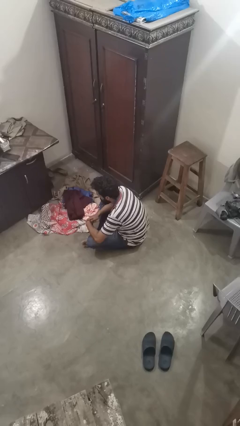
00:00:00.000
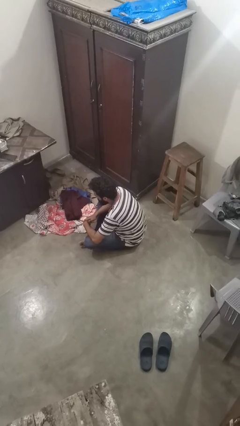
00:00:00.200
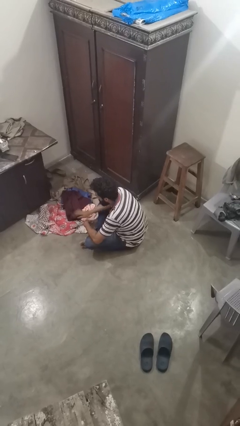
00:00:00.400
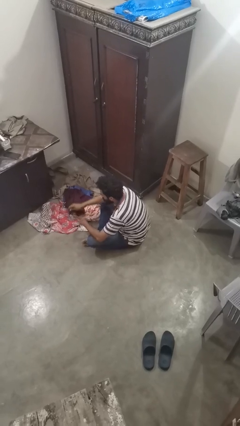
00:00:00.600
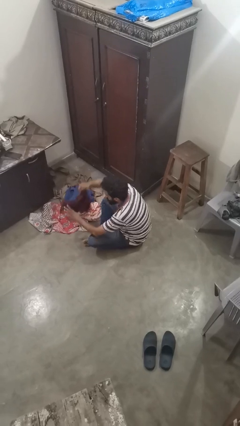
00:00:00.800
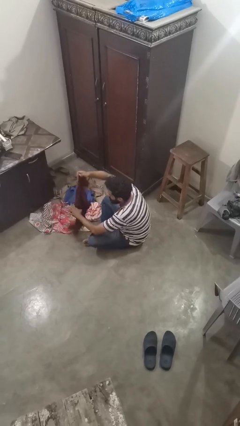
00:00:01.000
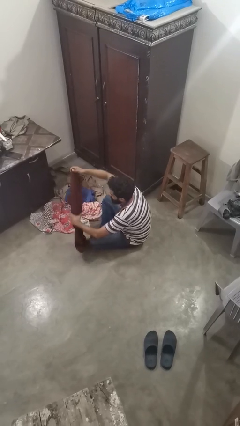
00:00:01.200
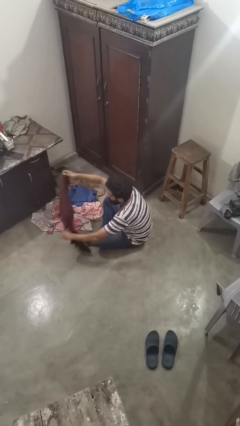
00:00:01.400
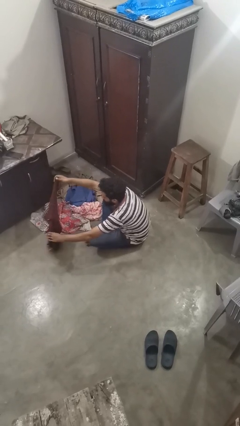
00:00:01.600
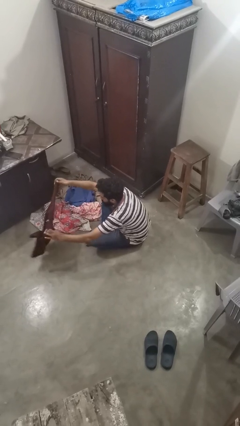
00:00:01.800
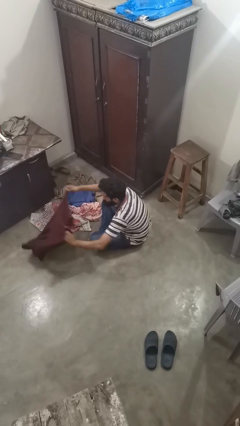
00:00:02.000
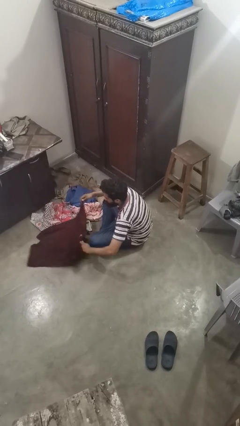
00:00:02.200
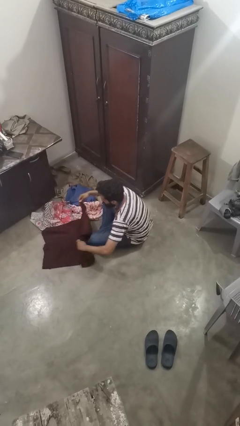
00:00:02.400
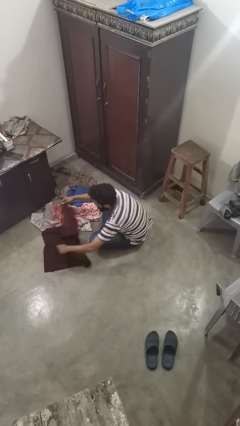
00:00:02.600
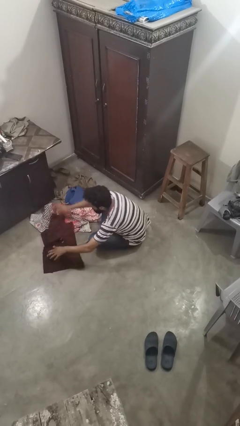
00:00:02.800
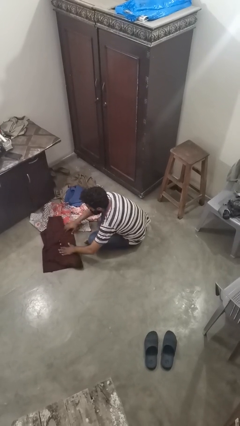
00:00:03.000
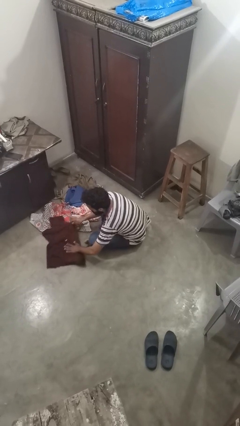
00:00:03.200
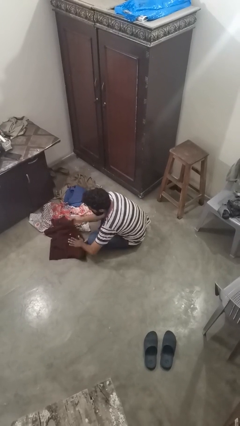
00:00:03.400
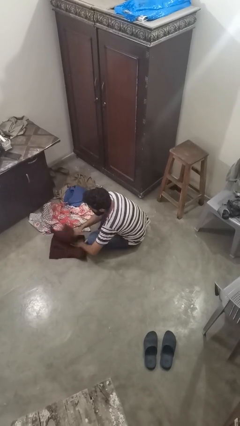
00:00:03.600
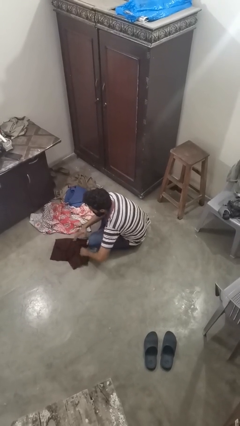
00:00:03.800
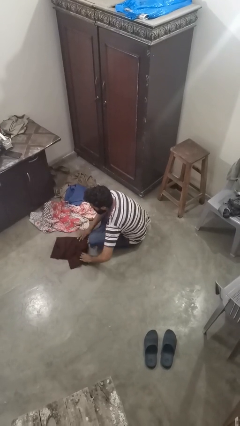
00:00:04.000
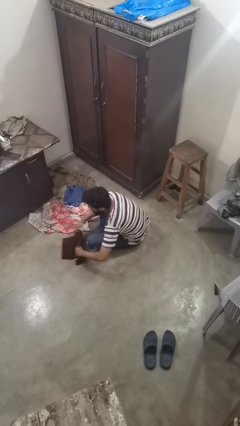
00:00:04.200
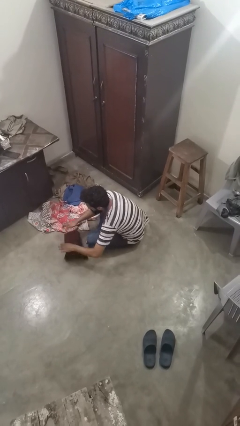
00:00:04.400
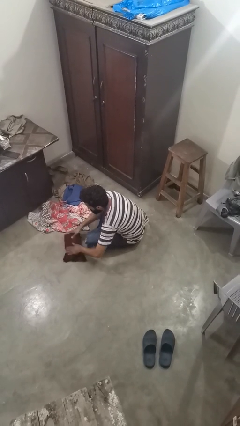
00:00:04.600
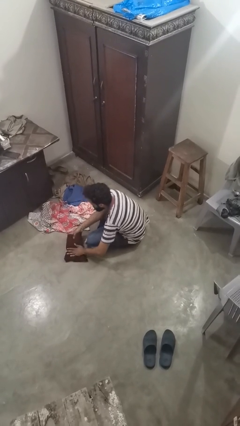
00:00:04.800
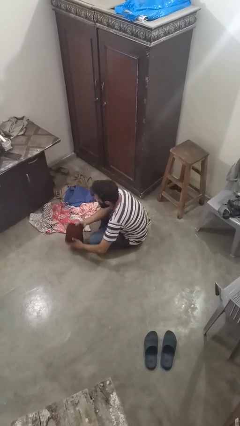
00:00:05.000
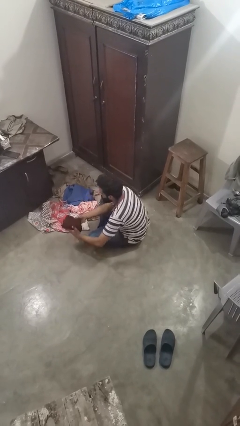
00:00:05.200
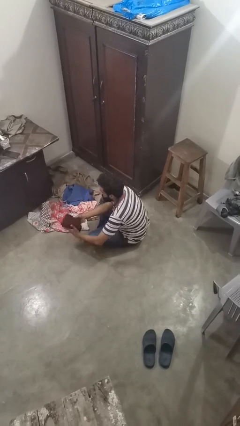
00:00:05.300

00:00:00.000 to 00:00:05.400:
person folds shirt

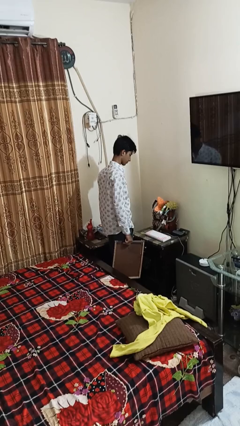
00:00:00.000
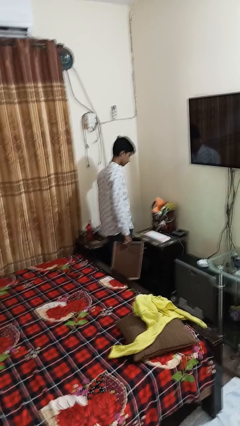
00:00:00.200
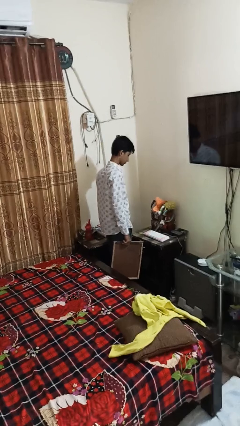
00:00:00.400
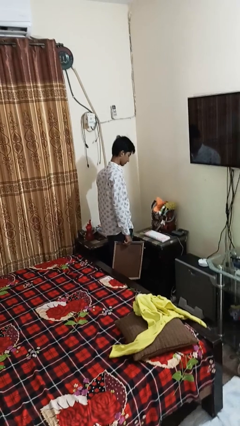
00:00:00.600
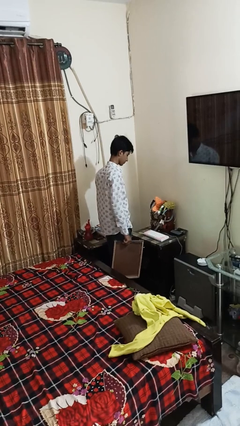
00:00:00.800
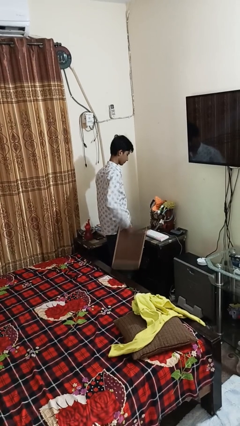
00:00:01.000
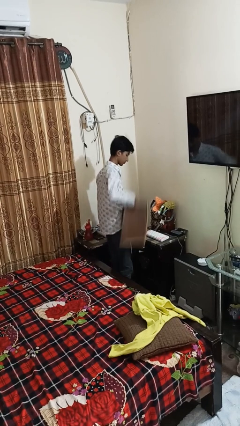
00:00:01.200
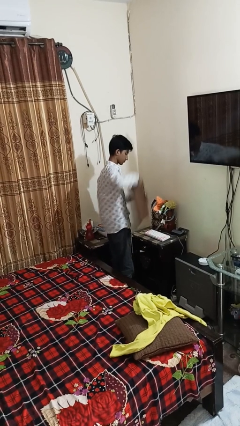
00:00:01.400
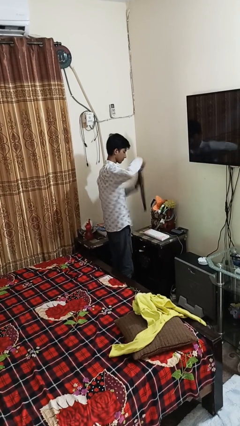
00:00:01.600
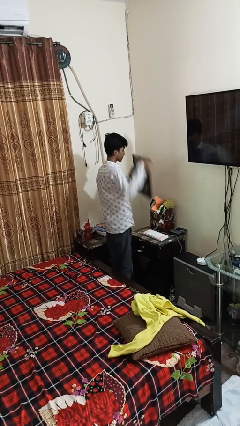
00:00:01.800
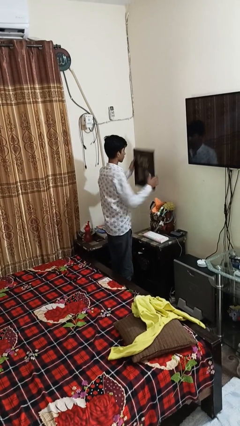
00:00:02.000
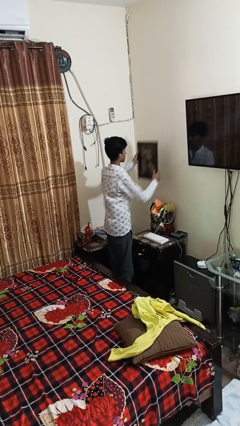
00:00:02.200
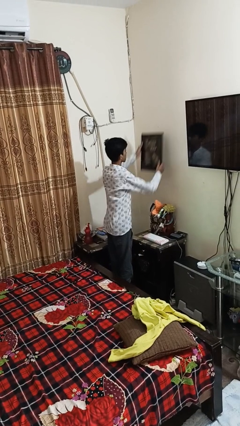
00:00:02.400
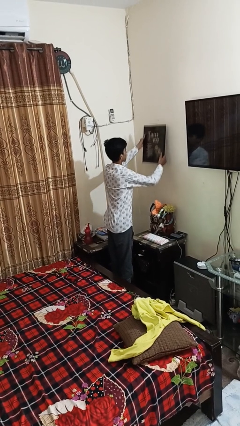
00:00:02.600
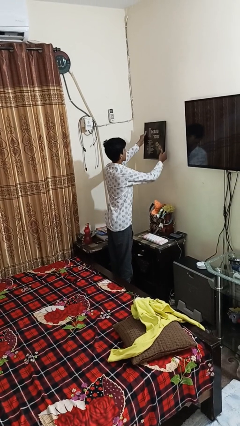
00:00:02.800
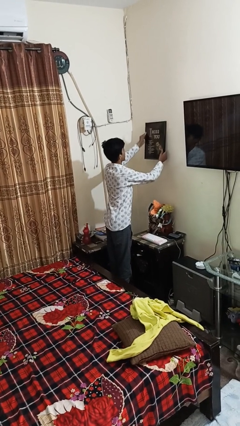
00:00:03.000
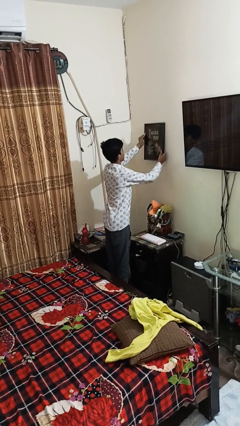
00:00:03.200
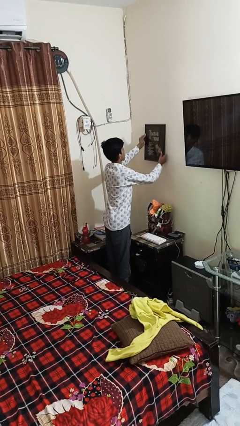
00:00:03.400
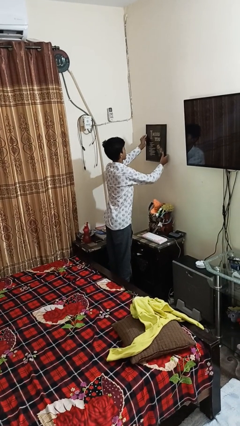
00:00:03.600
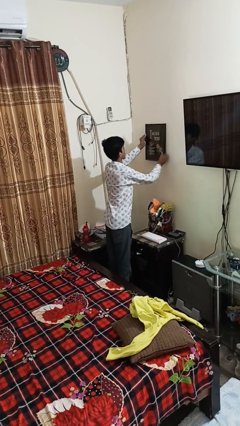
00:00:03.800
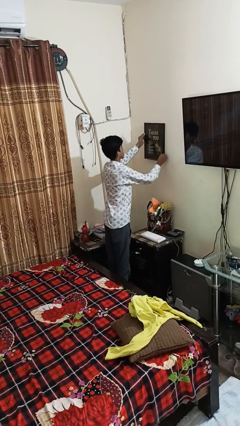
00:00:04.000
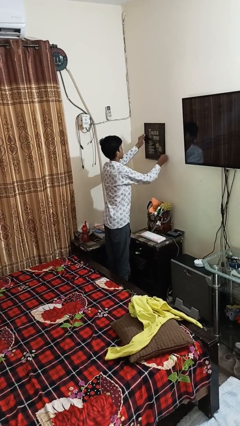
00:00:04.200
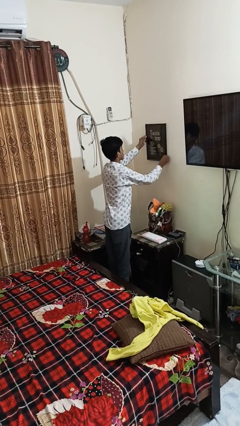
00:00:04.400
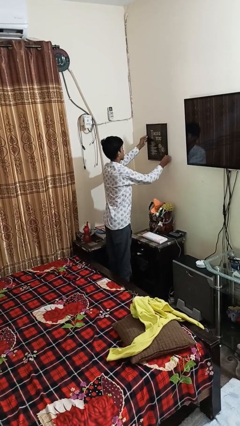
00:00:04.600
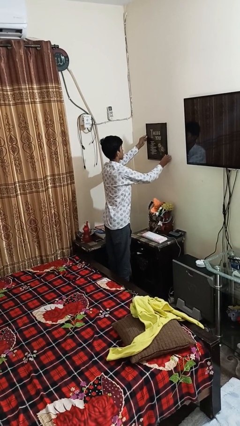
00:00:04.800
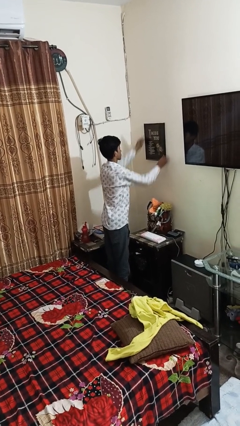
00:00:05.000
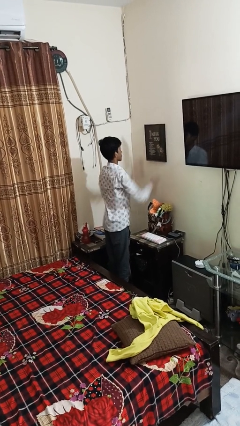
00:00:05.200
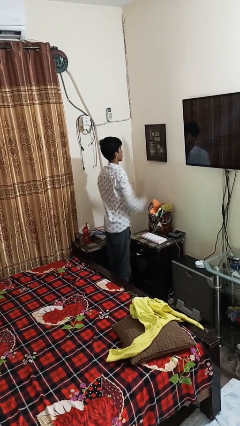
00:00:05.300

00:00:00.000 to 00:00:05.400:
person puts up picture frame

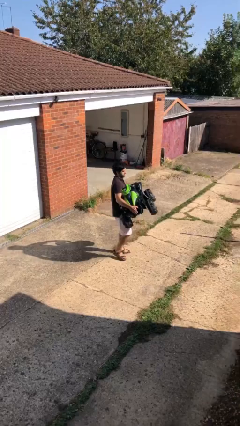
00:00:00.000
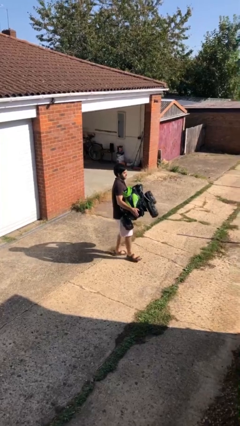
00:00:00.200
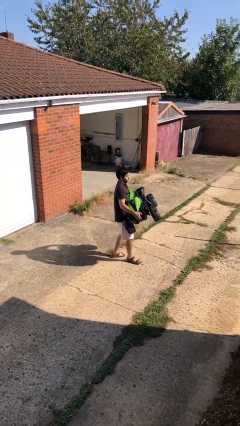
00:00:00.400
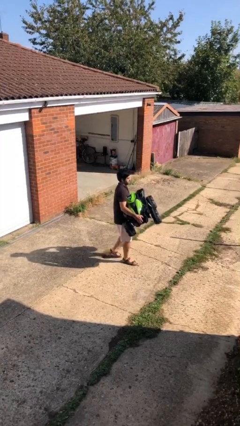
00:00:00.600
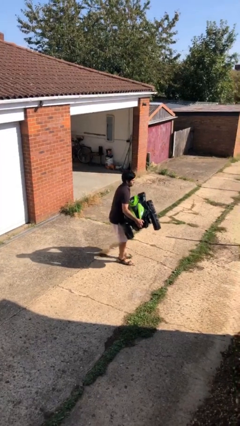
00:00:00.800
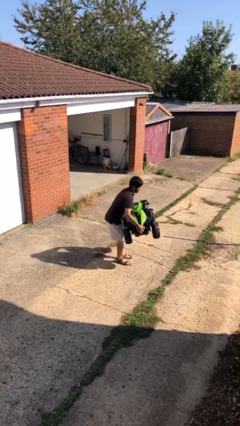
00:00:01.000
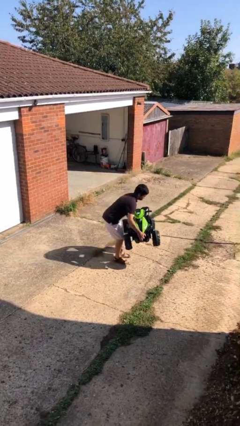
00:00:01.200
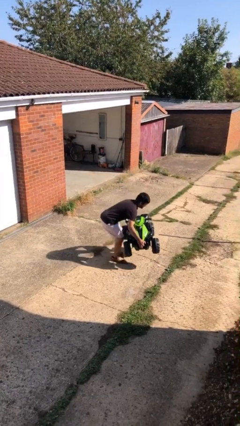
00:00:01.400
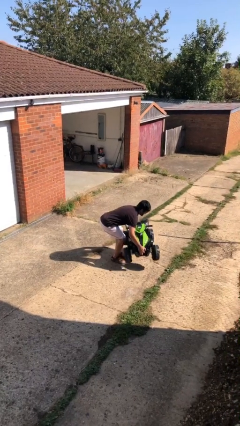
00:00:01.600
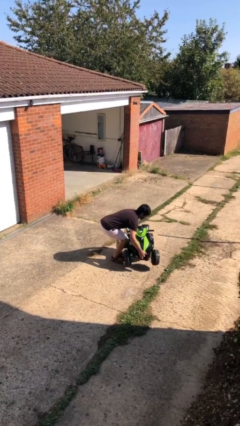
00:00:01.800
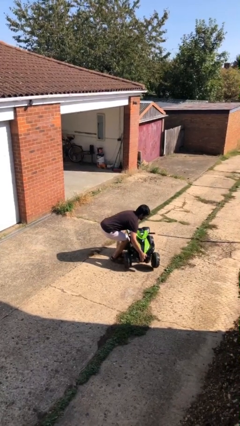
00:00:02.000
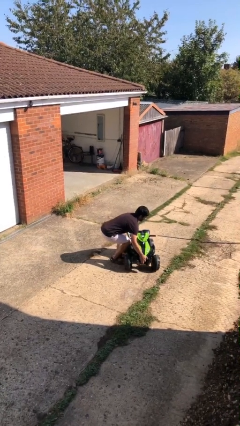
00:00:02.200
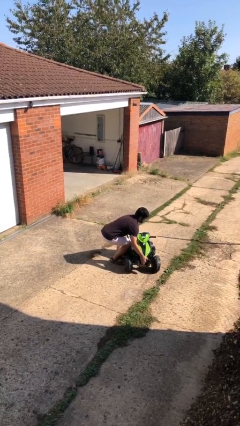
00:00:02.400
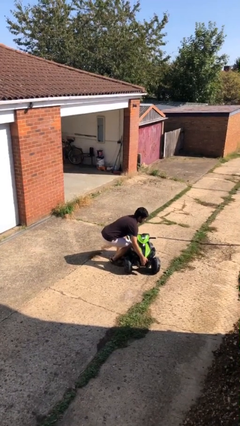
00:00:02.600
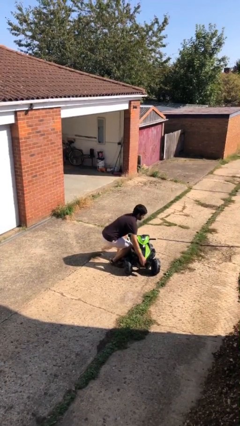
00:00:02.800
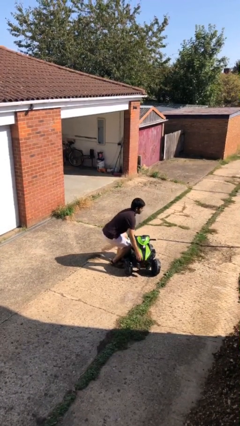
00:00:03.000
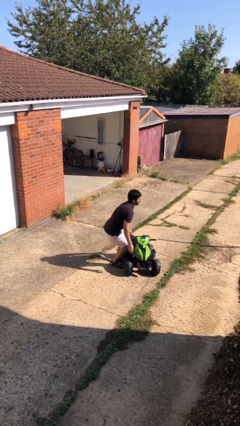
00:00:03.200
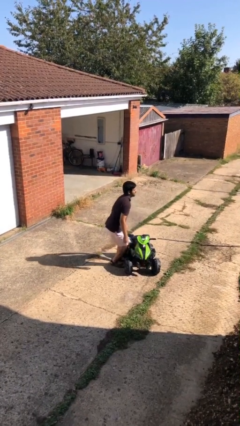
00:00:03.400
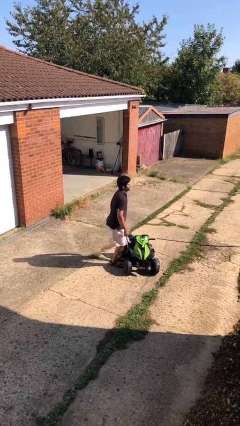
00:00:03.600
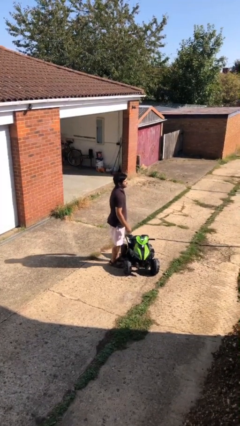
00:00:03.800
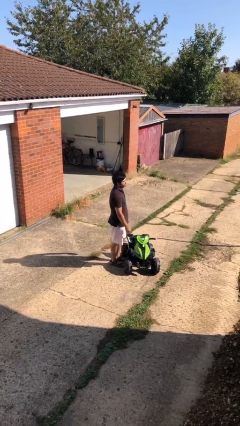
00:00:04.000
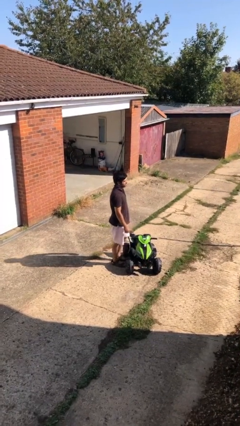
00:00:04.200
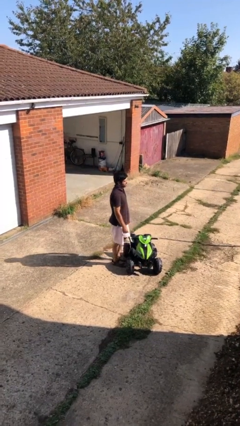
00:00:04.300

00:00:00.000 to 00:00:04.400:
person puts down object on floor

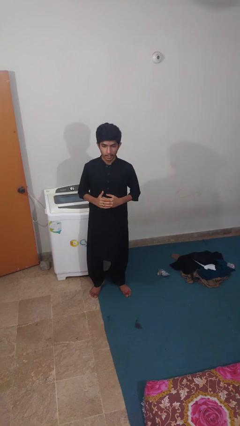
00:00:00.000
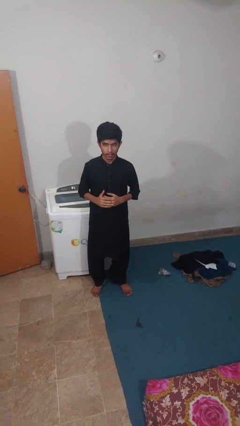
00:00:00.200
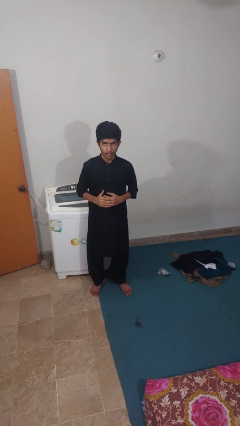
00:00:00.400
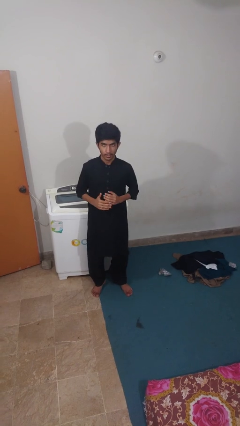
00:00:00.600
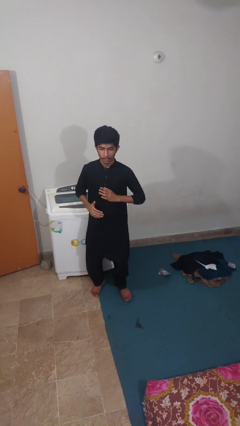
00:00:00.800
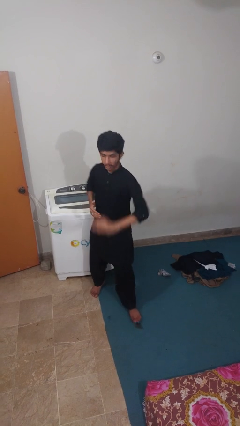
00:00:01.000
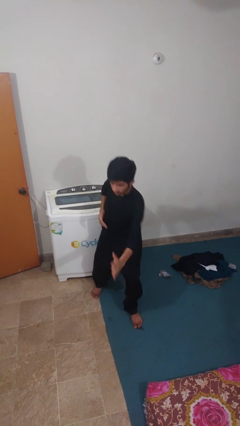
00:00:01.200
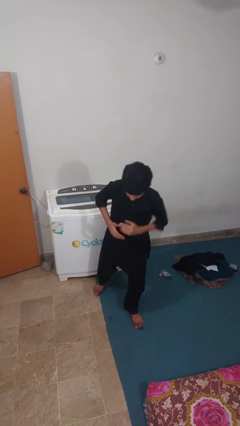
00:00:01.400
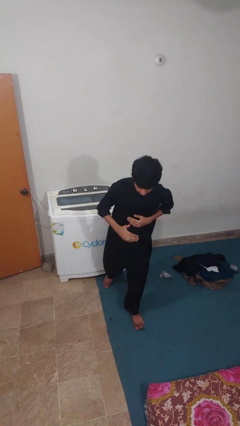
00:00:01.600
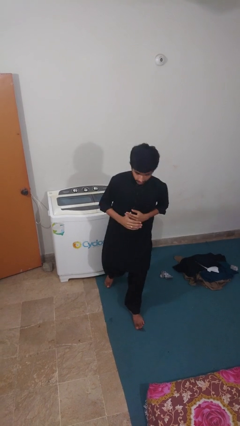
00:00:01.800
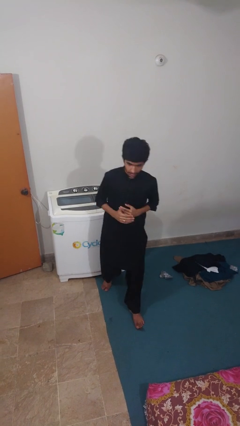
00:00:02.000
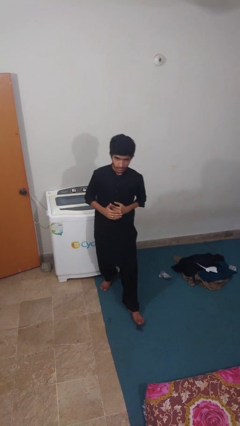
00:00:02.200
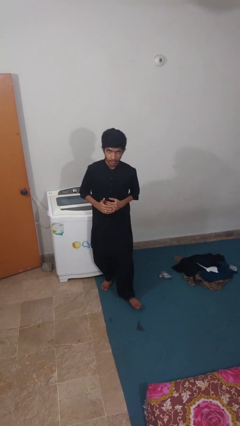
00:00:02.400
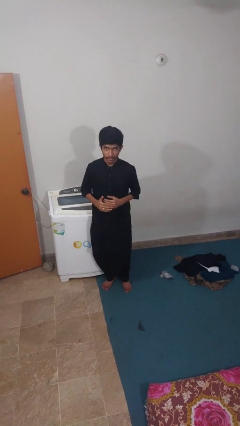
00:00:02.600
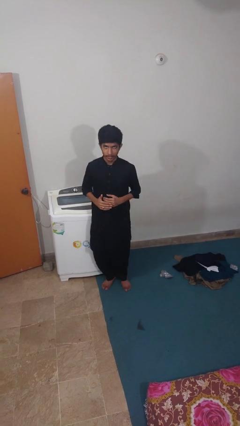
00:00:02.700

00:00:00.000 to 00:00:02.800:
person karate chop

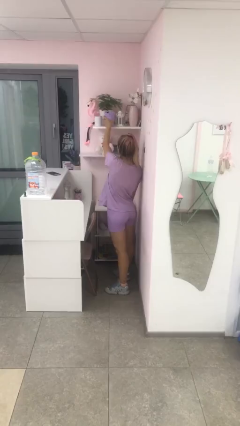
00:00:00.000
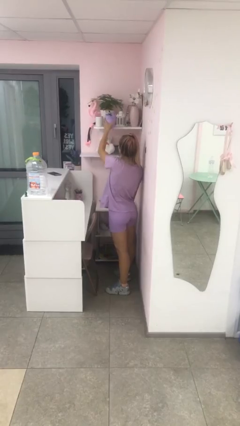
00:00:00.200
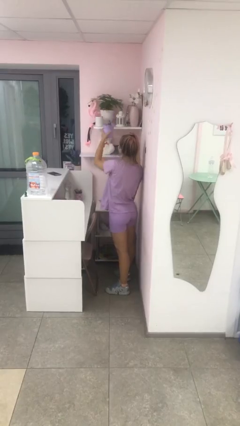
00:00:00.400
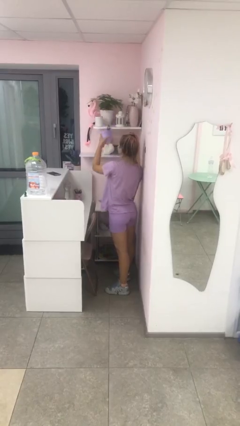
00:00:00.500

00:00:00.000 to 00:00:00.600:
person picks up object from cabinet
